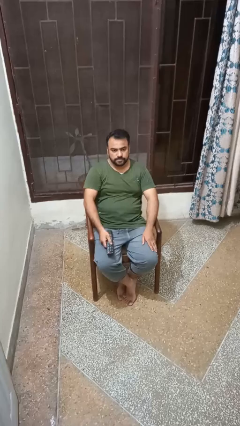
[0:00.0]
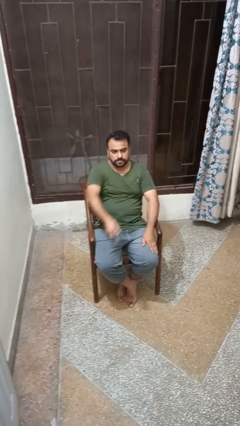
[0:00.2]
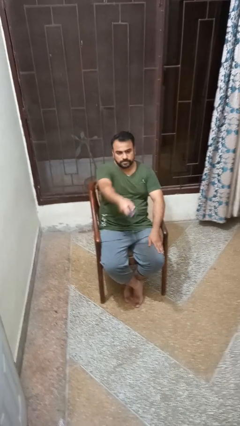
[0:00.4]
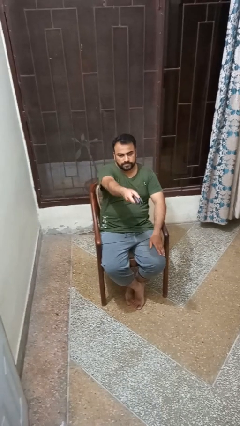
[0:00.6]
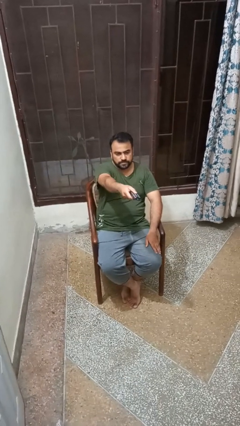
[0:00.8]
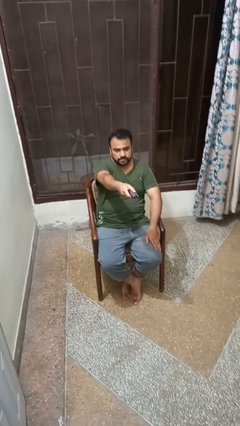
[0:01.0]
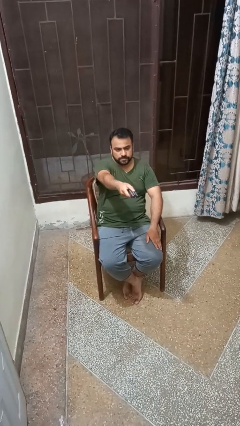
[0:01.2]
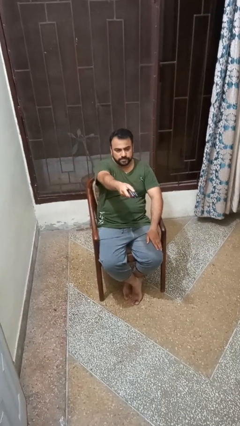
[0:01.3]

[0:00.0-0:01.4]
person uses television remote

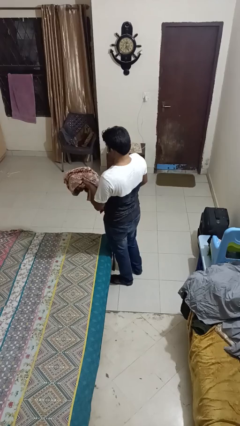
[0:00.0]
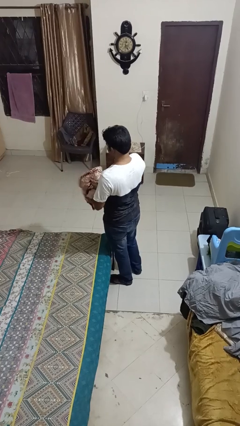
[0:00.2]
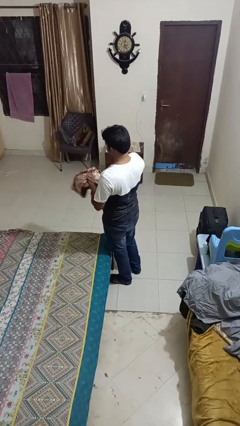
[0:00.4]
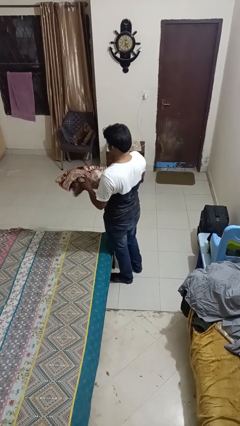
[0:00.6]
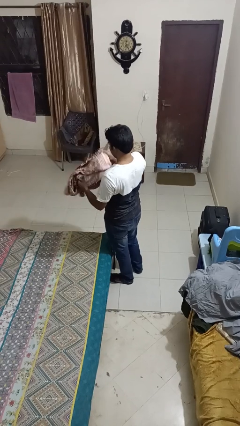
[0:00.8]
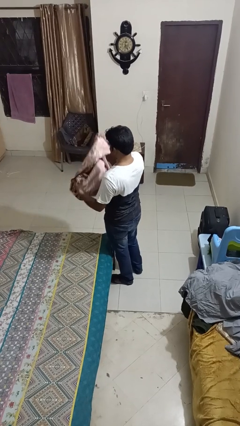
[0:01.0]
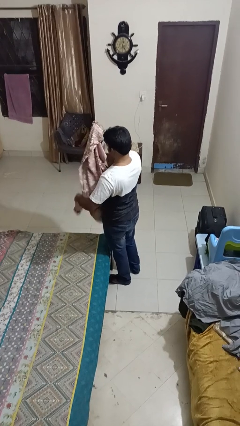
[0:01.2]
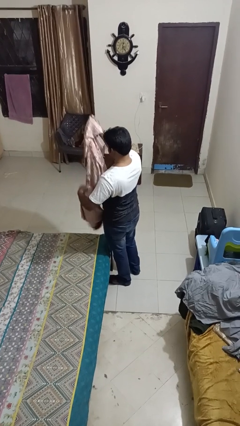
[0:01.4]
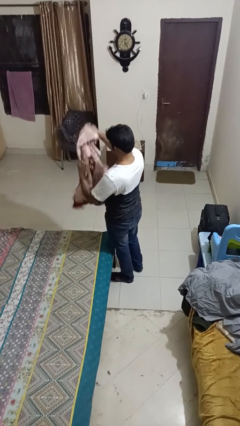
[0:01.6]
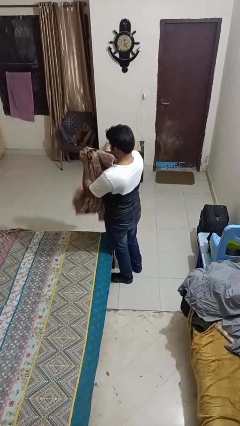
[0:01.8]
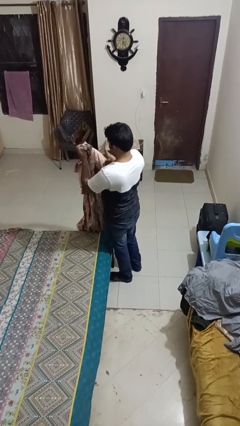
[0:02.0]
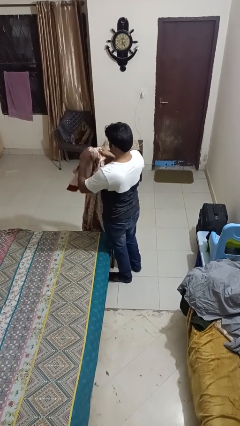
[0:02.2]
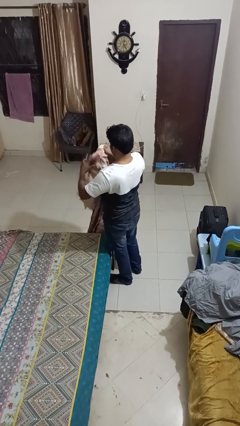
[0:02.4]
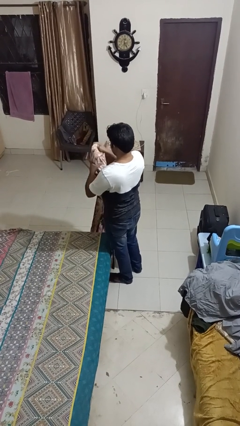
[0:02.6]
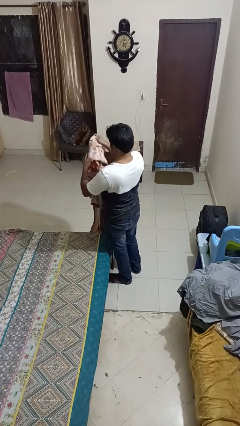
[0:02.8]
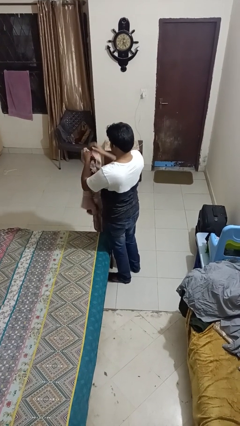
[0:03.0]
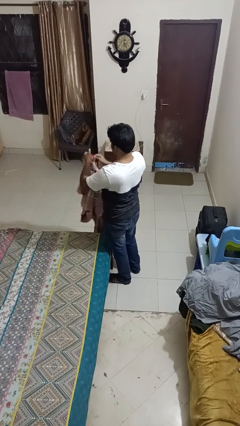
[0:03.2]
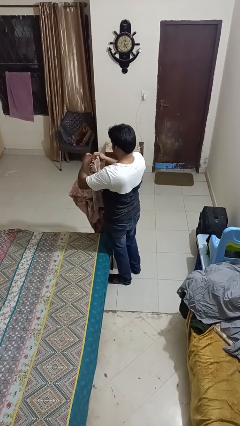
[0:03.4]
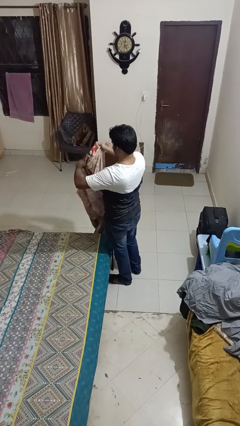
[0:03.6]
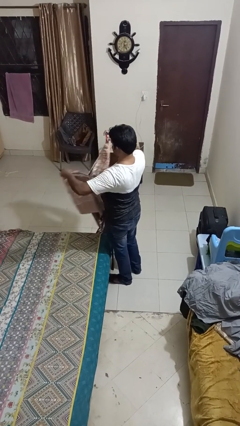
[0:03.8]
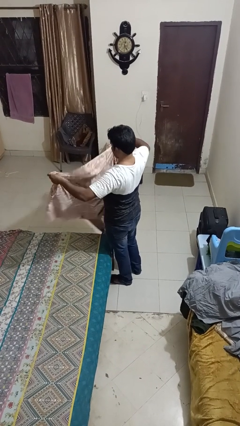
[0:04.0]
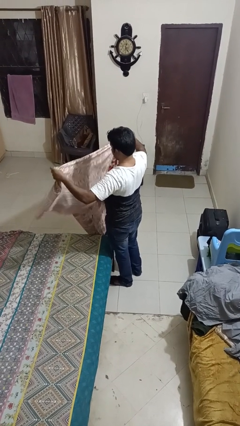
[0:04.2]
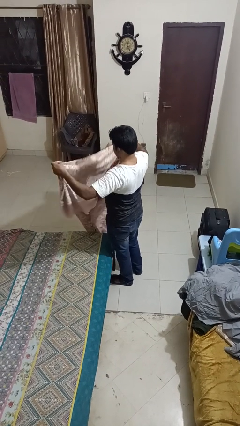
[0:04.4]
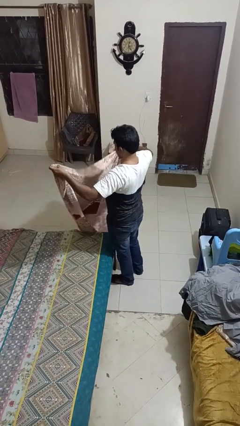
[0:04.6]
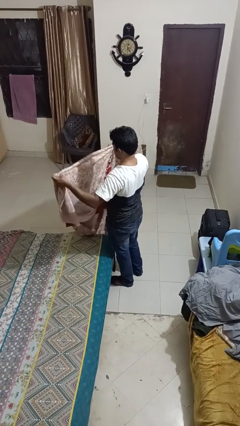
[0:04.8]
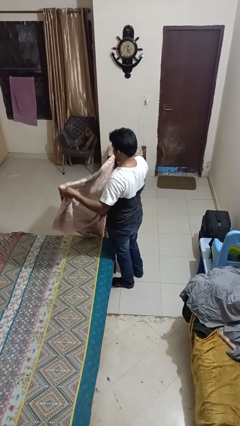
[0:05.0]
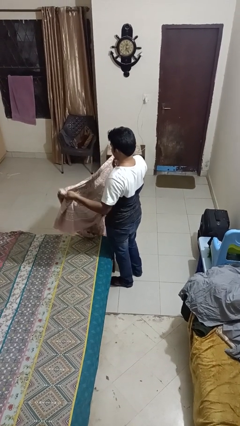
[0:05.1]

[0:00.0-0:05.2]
person unfolds blanket

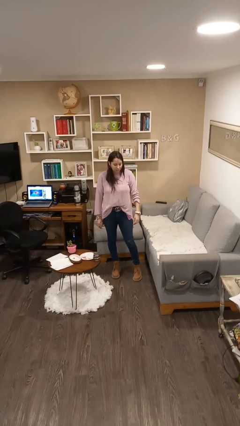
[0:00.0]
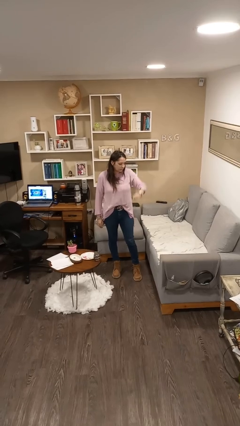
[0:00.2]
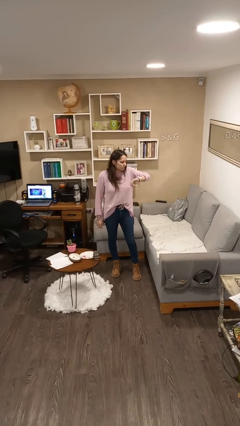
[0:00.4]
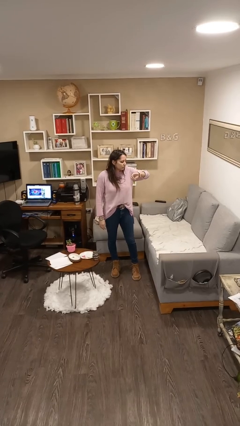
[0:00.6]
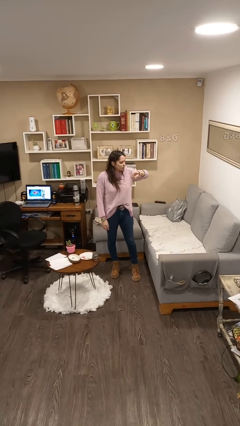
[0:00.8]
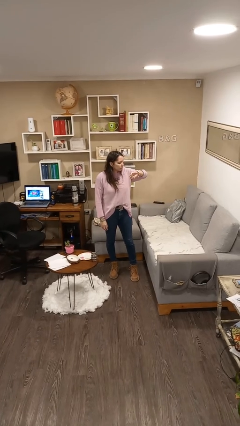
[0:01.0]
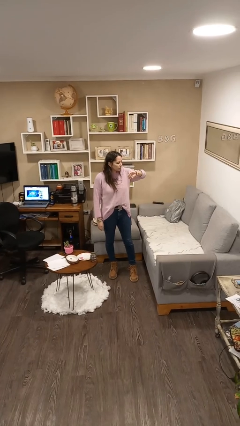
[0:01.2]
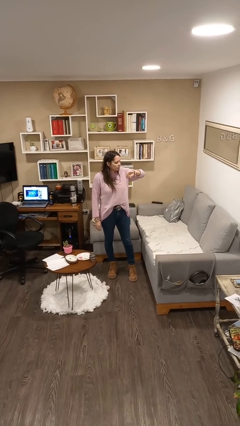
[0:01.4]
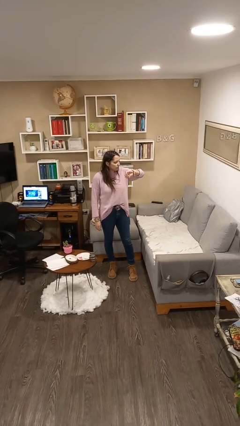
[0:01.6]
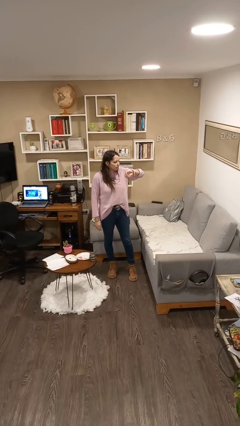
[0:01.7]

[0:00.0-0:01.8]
person looks at wristwatch

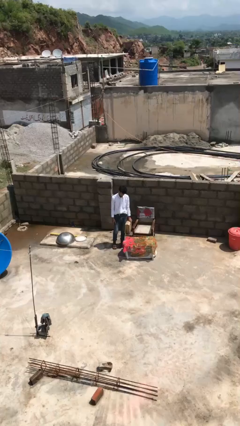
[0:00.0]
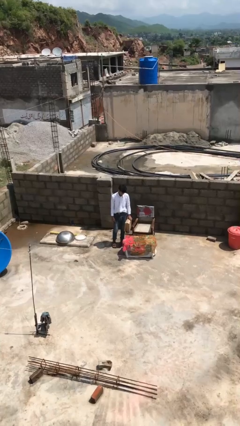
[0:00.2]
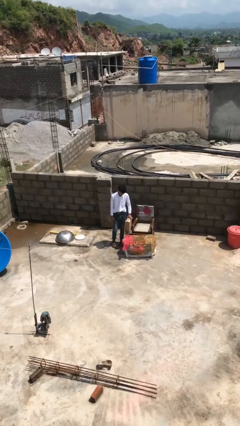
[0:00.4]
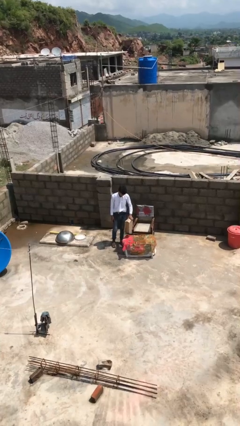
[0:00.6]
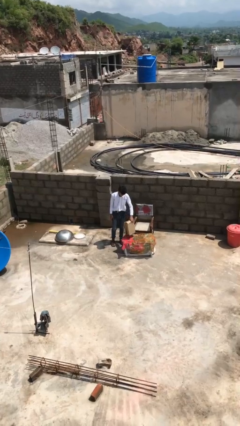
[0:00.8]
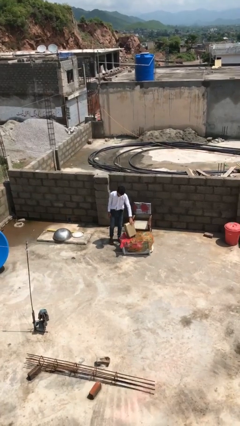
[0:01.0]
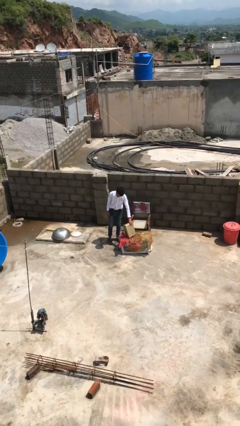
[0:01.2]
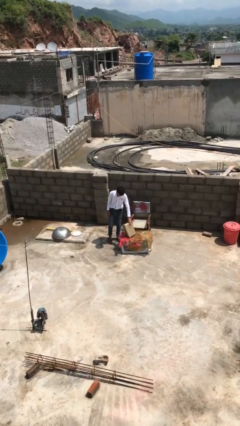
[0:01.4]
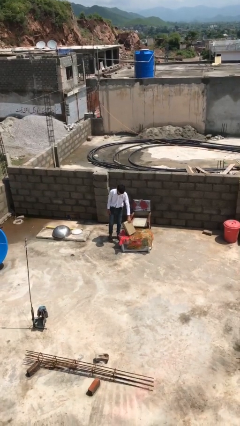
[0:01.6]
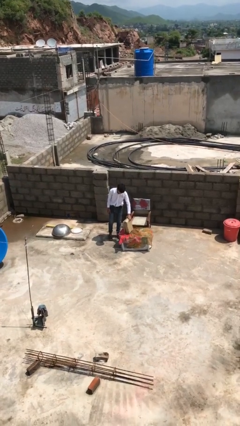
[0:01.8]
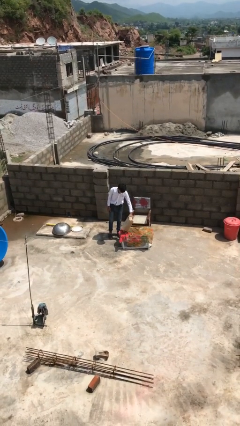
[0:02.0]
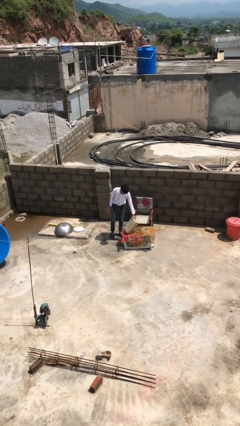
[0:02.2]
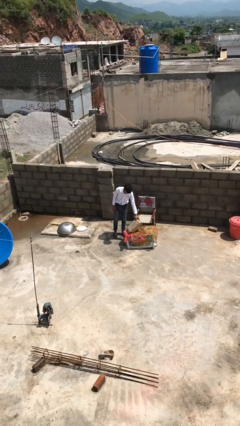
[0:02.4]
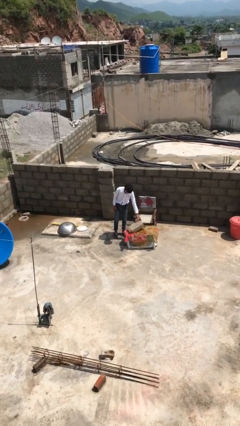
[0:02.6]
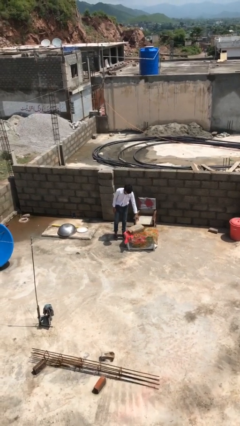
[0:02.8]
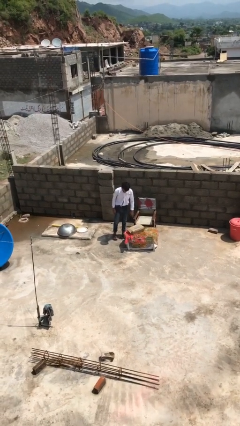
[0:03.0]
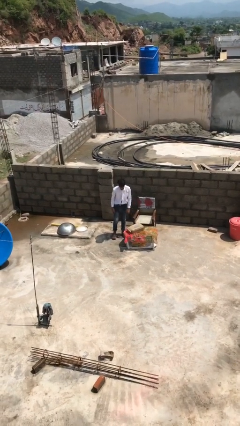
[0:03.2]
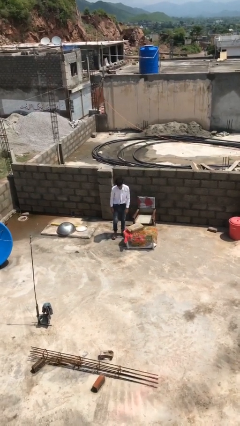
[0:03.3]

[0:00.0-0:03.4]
person puts down object on table

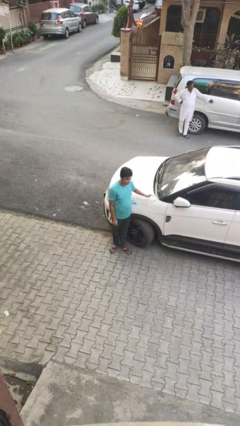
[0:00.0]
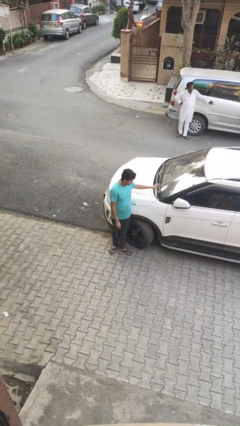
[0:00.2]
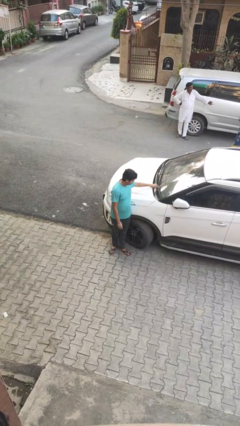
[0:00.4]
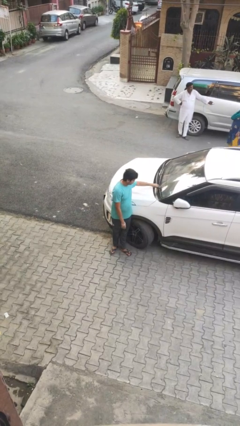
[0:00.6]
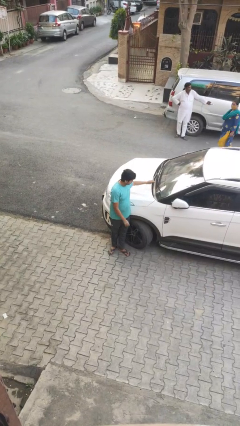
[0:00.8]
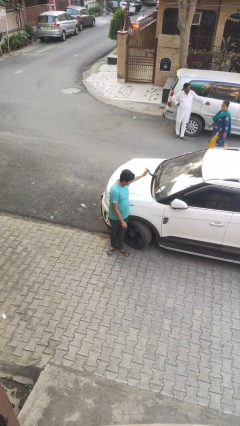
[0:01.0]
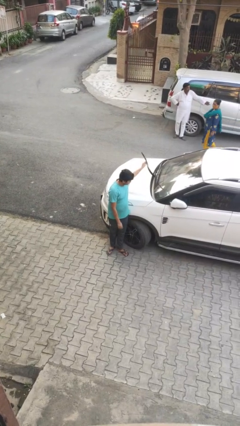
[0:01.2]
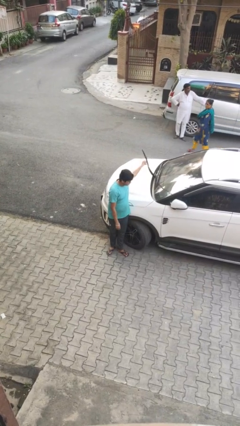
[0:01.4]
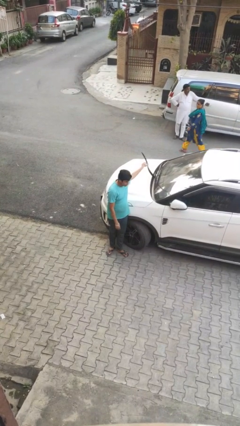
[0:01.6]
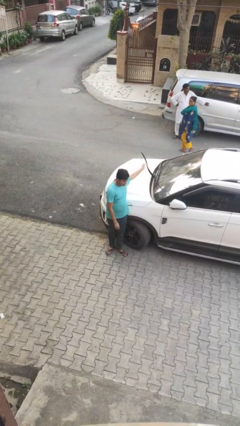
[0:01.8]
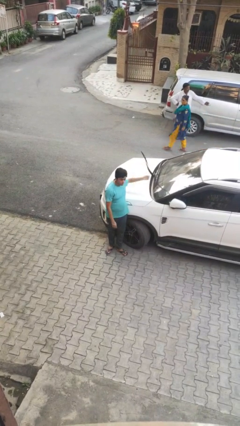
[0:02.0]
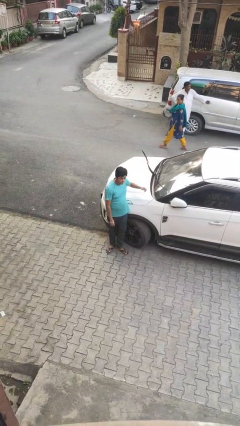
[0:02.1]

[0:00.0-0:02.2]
person flips up car wipers

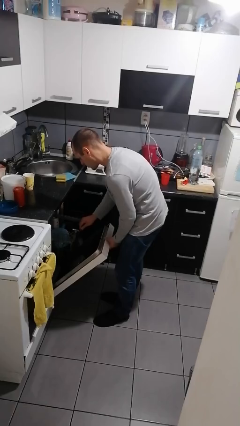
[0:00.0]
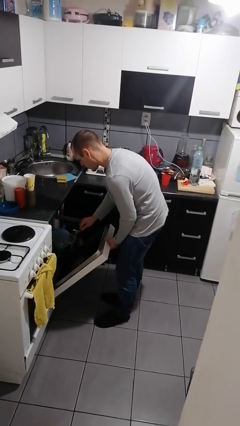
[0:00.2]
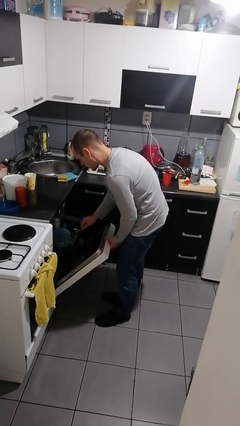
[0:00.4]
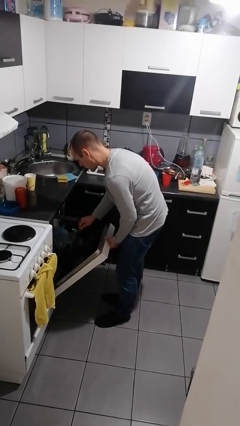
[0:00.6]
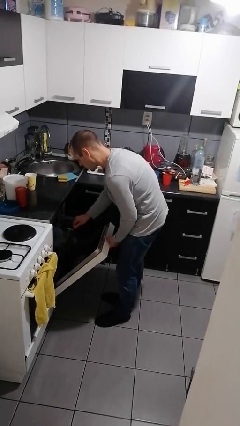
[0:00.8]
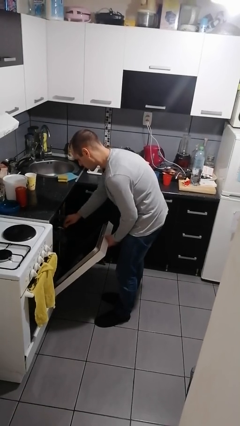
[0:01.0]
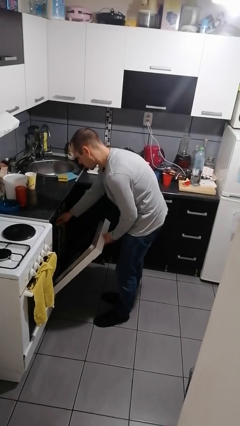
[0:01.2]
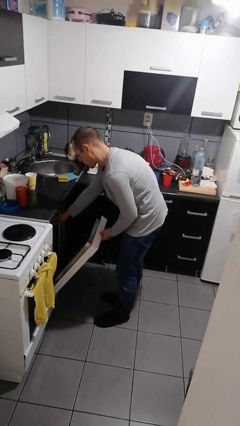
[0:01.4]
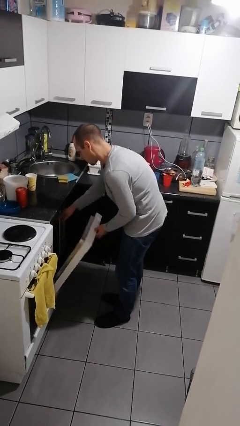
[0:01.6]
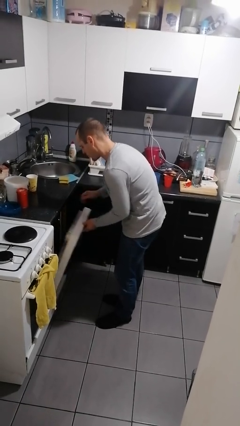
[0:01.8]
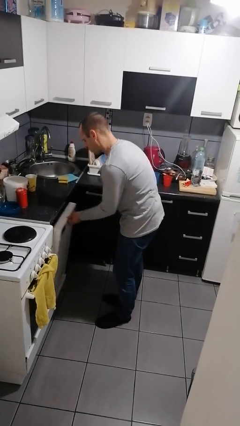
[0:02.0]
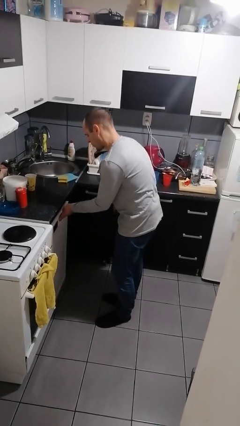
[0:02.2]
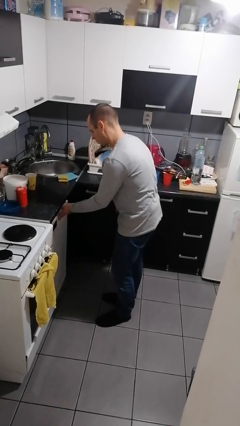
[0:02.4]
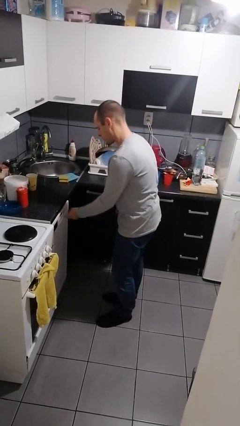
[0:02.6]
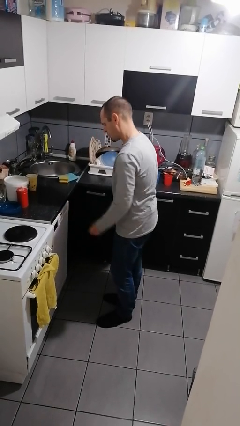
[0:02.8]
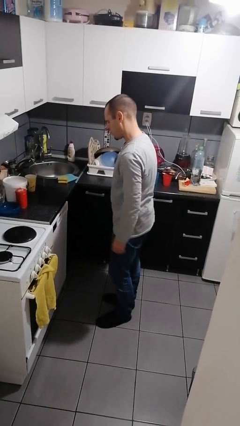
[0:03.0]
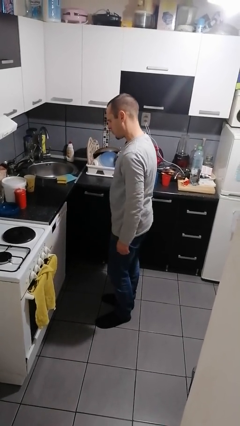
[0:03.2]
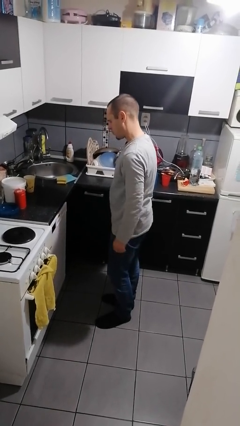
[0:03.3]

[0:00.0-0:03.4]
person closes dishwasher

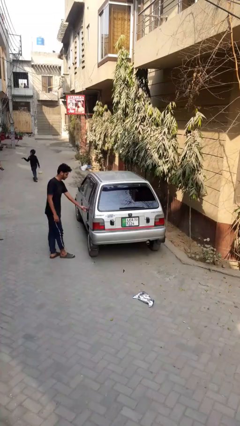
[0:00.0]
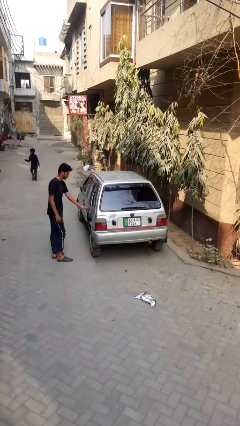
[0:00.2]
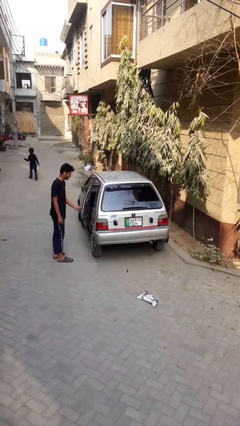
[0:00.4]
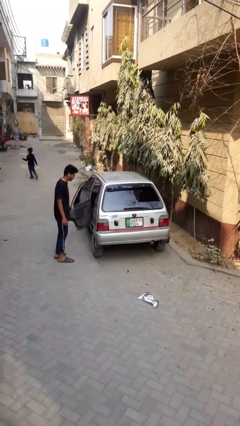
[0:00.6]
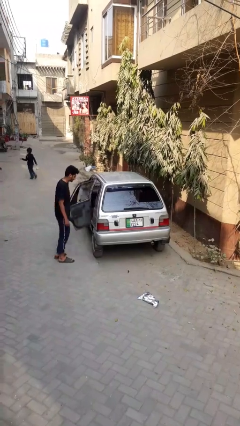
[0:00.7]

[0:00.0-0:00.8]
car drops off person
